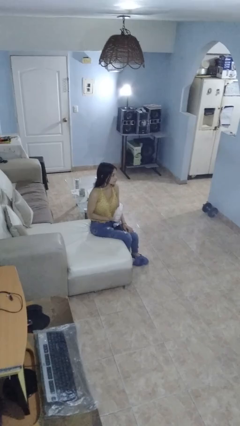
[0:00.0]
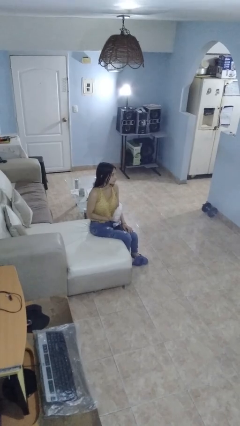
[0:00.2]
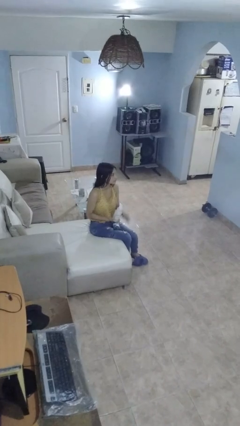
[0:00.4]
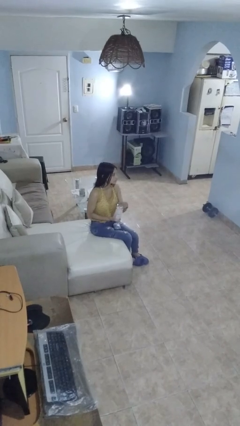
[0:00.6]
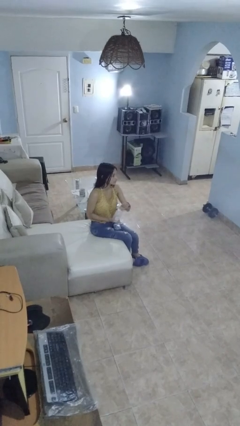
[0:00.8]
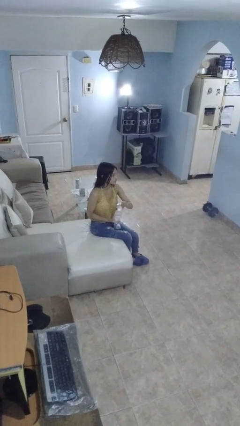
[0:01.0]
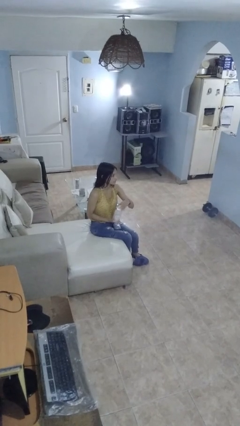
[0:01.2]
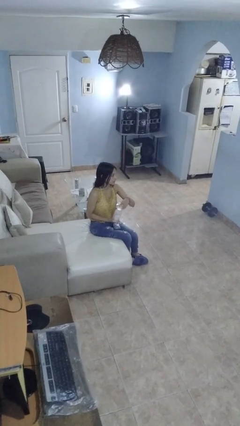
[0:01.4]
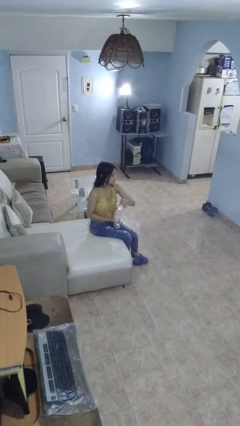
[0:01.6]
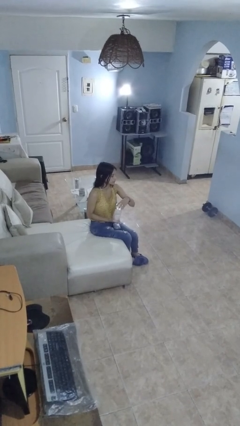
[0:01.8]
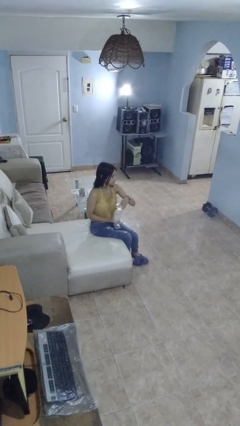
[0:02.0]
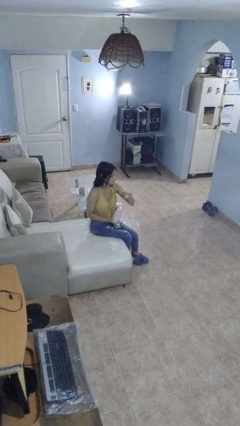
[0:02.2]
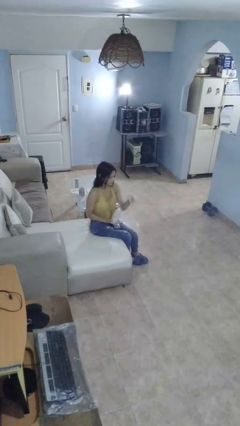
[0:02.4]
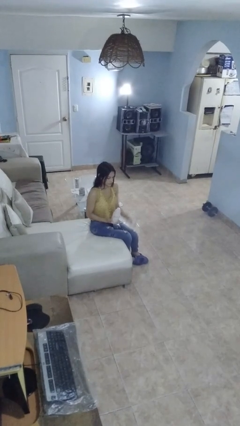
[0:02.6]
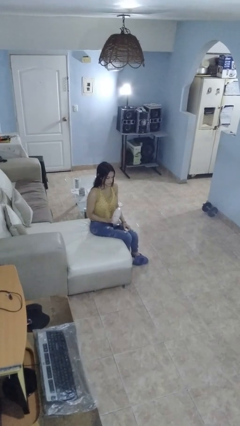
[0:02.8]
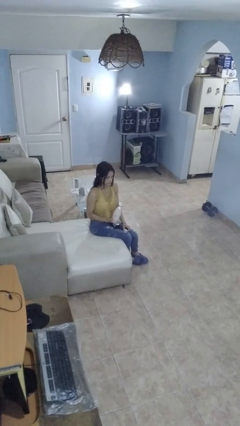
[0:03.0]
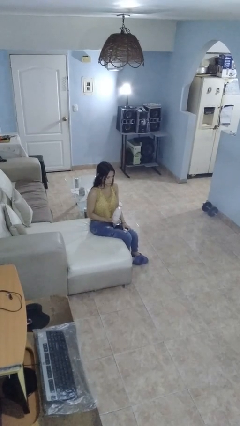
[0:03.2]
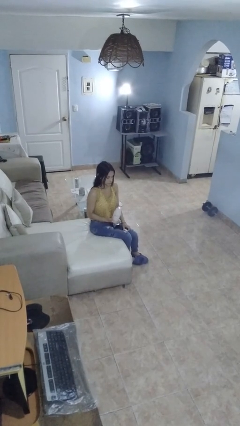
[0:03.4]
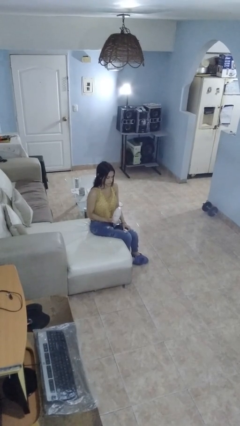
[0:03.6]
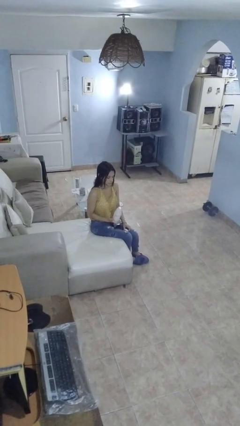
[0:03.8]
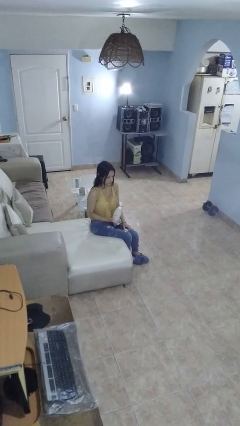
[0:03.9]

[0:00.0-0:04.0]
person unscrews lid from bottle

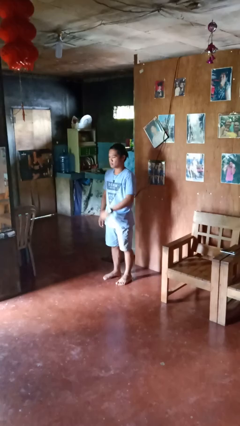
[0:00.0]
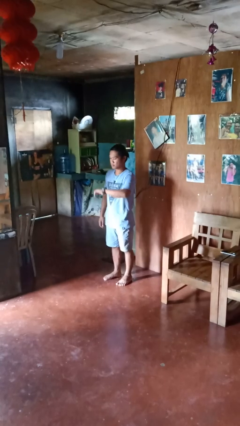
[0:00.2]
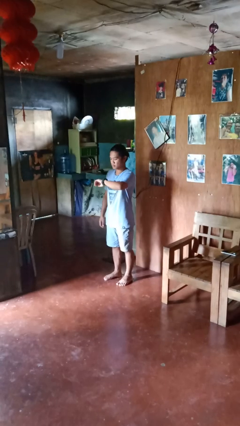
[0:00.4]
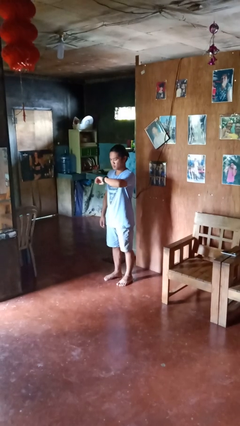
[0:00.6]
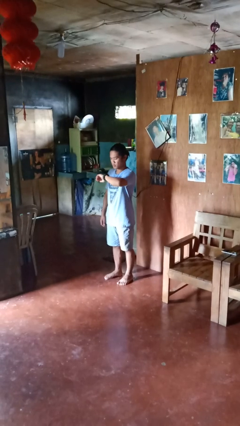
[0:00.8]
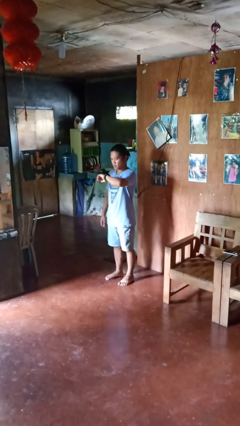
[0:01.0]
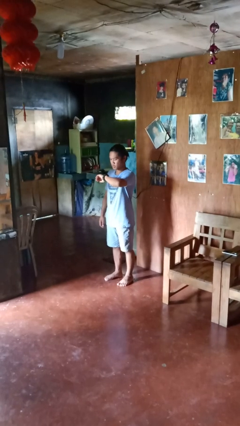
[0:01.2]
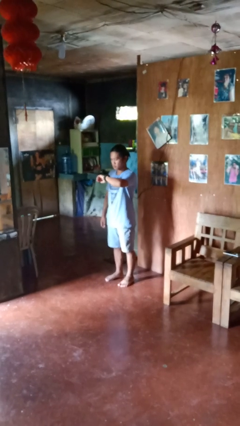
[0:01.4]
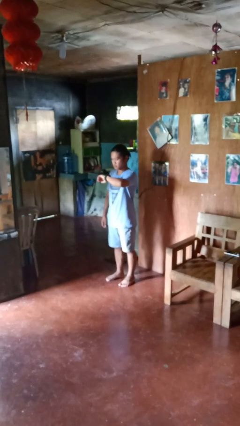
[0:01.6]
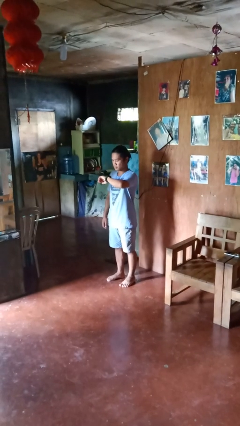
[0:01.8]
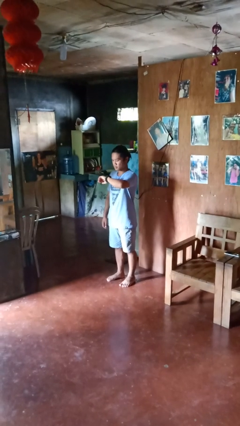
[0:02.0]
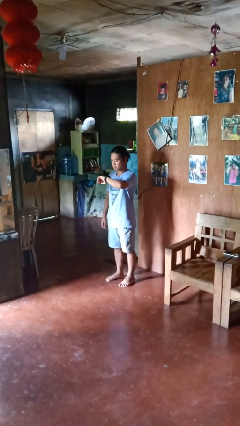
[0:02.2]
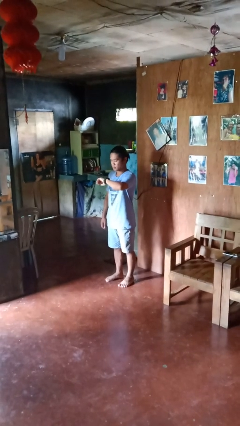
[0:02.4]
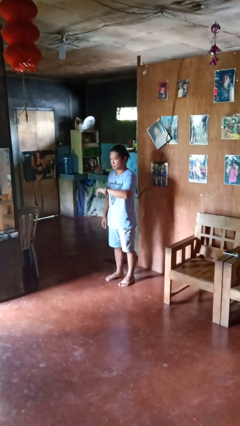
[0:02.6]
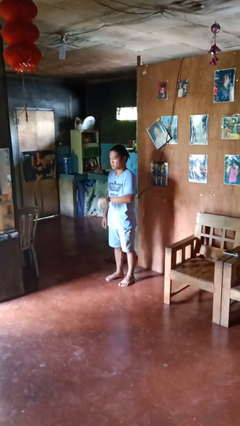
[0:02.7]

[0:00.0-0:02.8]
person looks at wristwatch

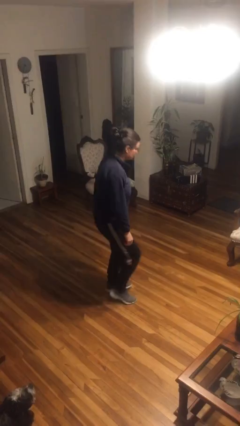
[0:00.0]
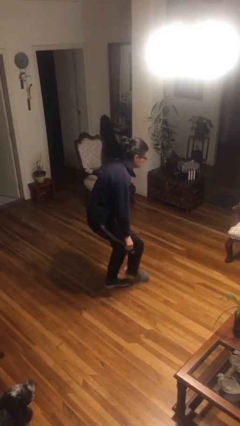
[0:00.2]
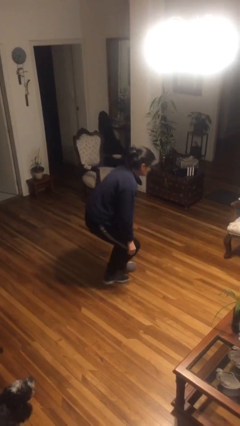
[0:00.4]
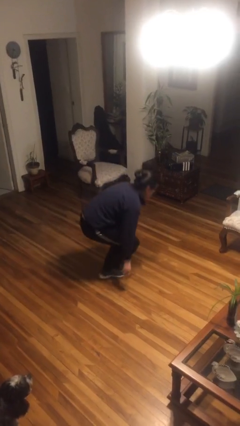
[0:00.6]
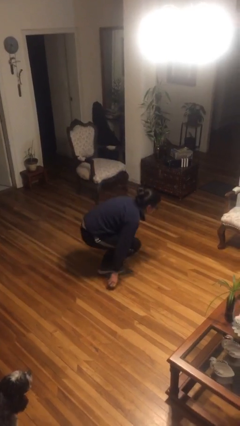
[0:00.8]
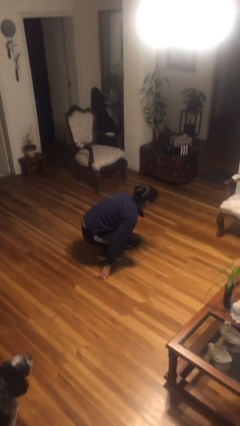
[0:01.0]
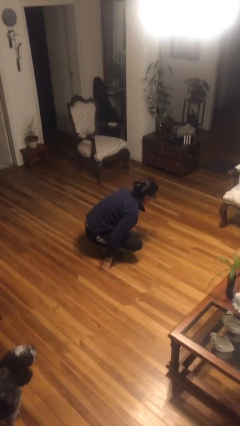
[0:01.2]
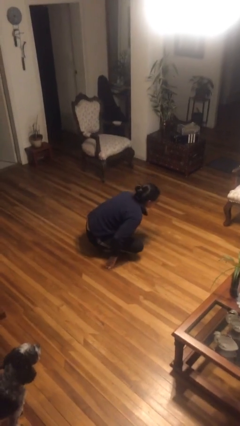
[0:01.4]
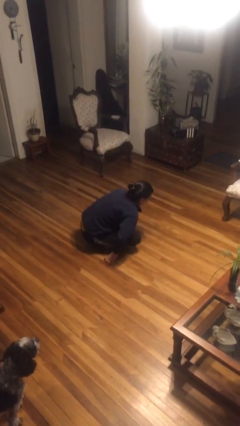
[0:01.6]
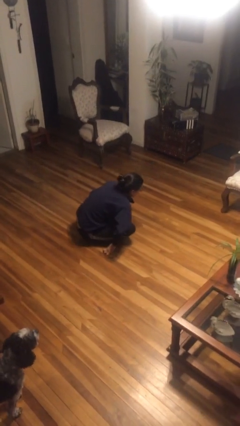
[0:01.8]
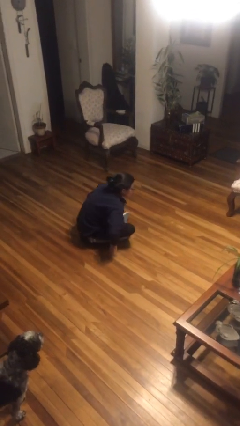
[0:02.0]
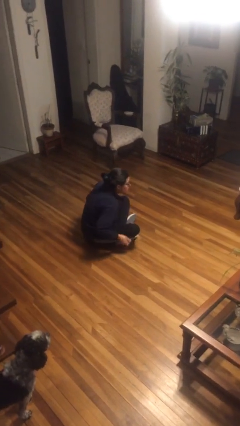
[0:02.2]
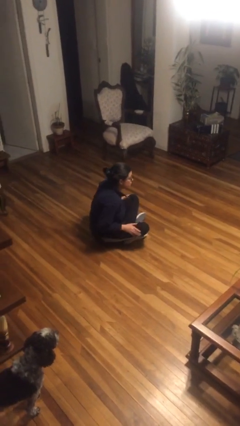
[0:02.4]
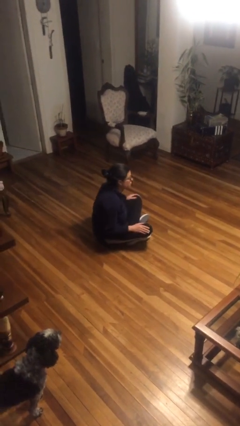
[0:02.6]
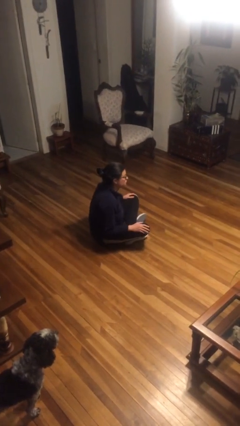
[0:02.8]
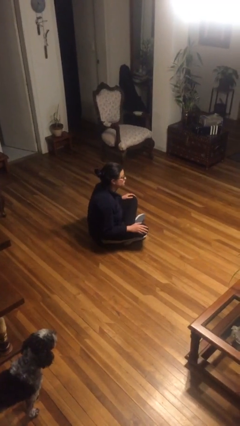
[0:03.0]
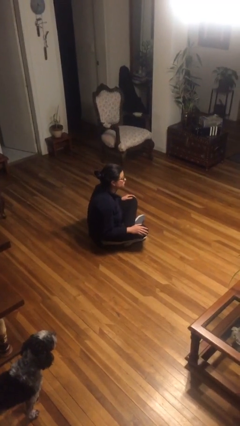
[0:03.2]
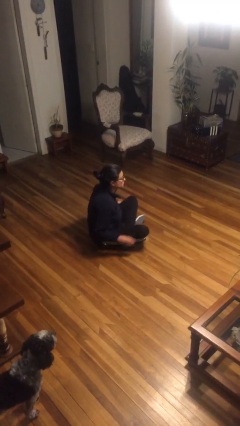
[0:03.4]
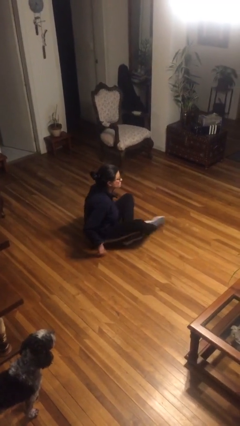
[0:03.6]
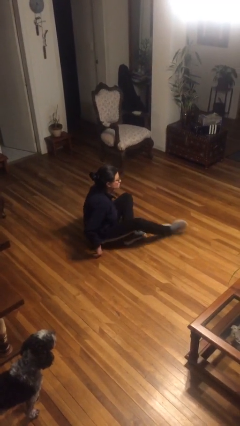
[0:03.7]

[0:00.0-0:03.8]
person sits crisscross

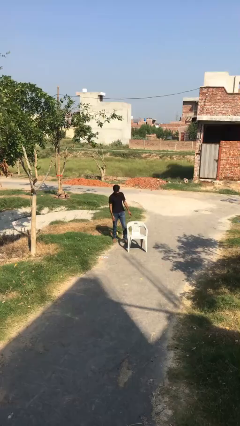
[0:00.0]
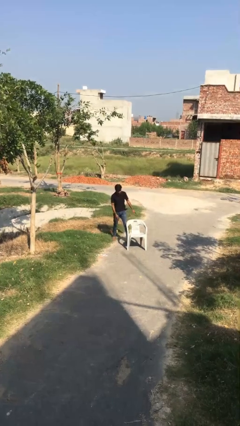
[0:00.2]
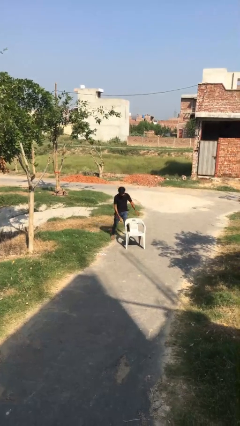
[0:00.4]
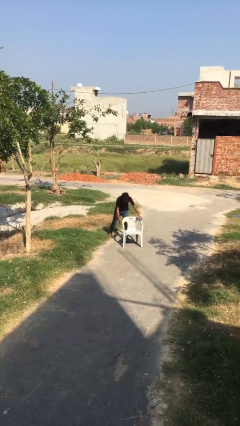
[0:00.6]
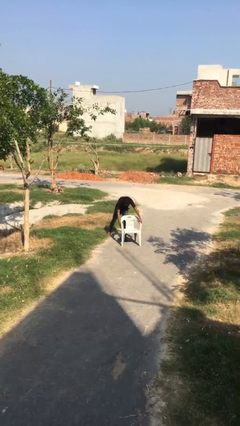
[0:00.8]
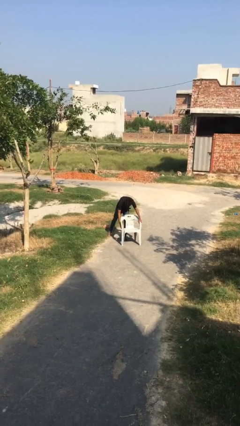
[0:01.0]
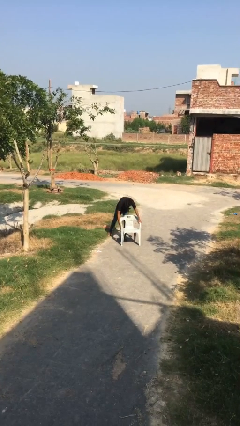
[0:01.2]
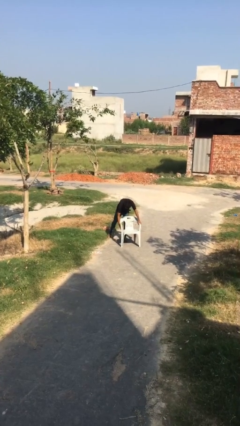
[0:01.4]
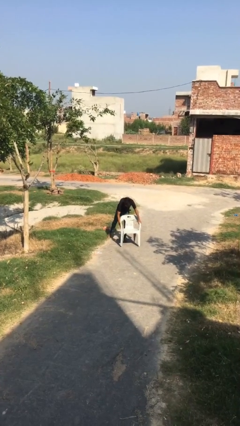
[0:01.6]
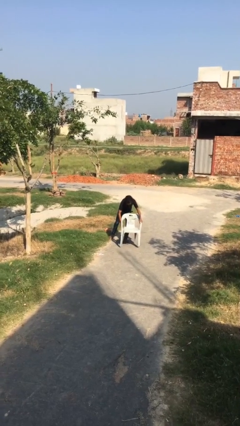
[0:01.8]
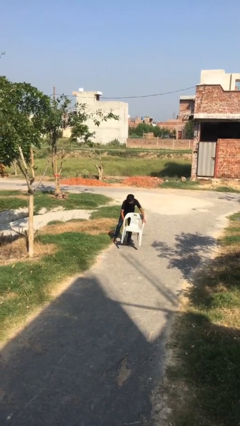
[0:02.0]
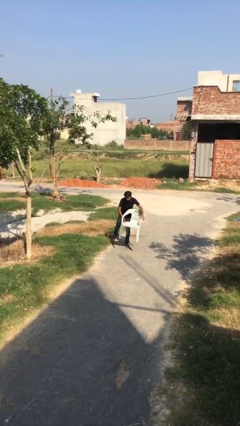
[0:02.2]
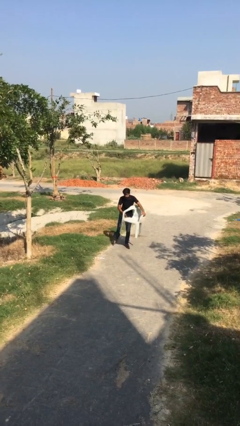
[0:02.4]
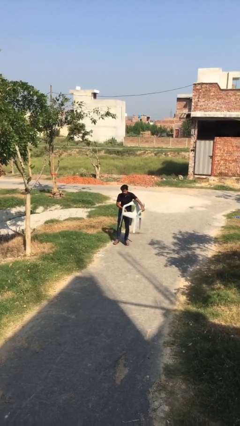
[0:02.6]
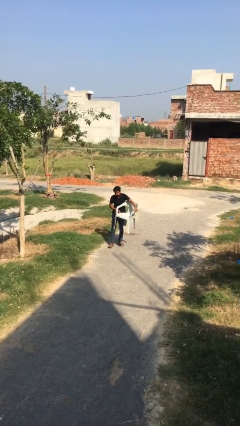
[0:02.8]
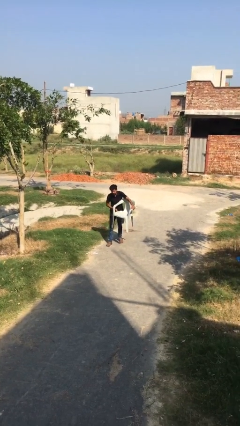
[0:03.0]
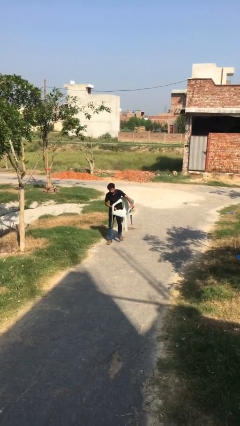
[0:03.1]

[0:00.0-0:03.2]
person picks up object from floor

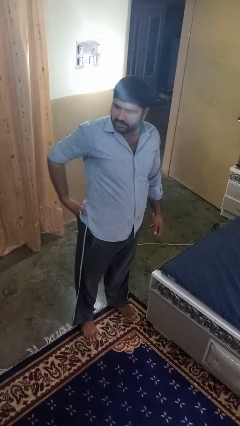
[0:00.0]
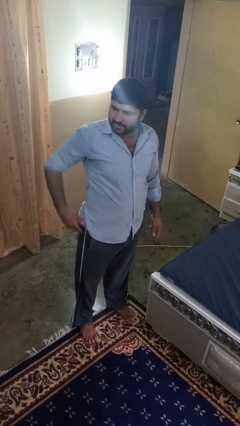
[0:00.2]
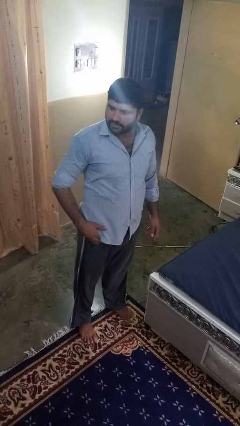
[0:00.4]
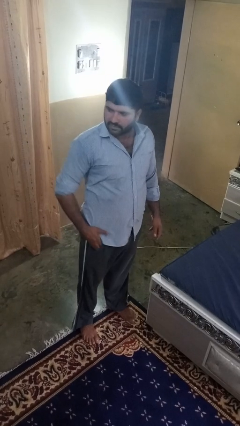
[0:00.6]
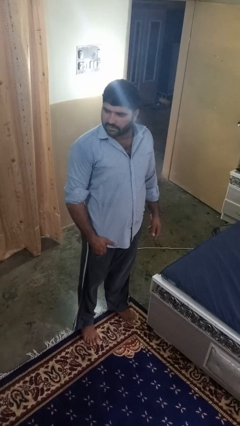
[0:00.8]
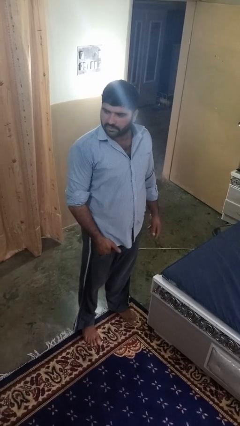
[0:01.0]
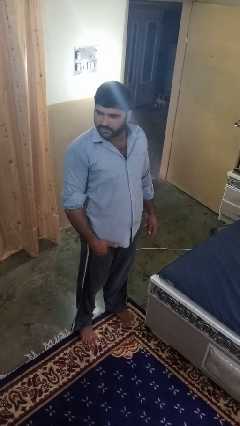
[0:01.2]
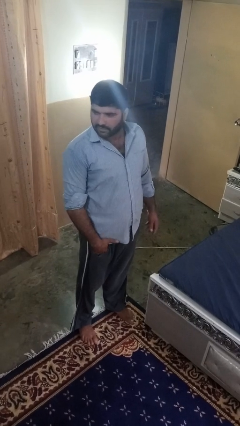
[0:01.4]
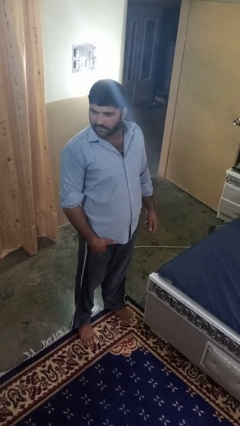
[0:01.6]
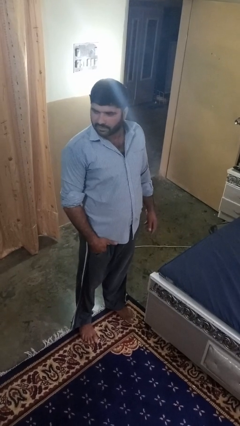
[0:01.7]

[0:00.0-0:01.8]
person puts hands in back pockets

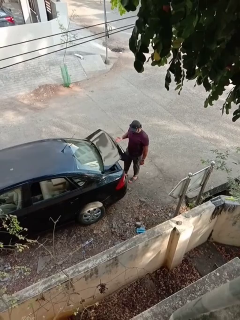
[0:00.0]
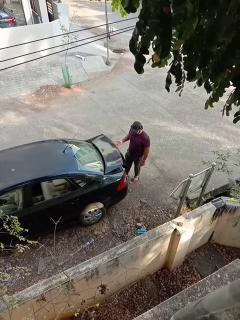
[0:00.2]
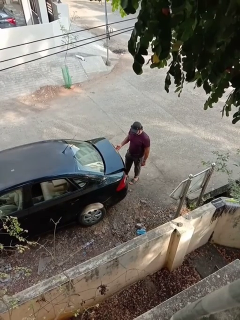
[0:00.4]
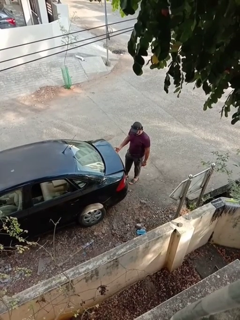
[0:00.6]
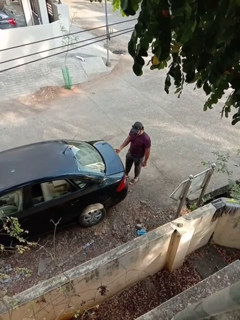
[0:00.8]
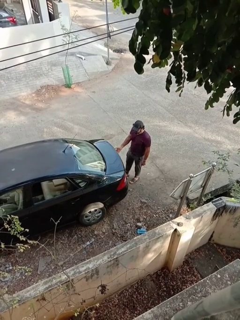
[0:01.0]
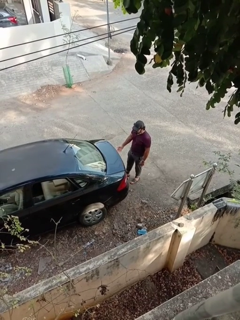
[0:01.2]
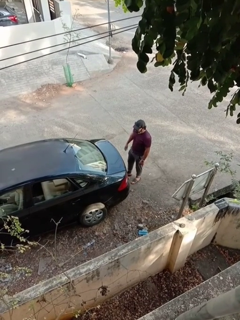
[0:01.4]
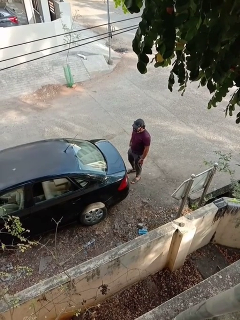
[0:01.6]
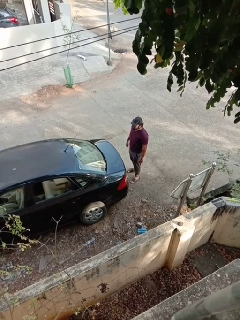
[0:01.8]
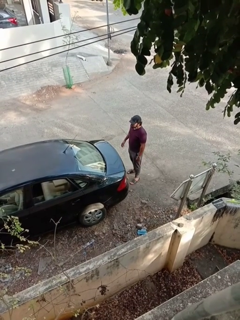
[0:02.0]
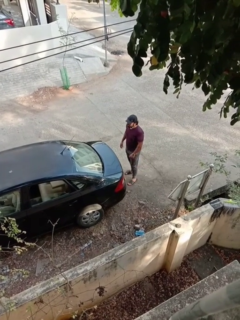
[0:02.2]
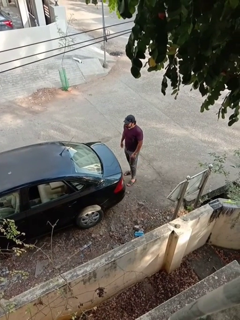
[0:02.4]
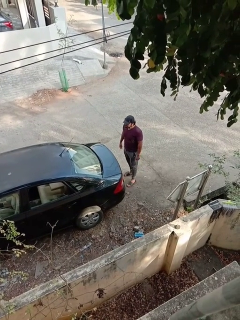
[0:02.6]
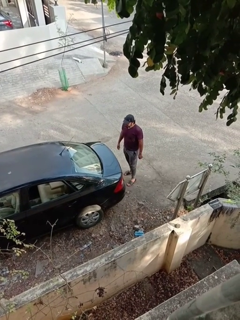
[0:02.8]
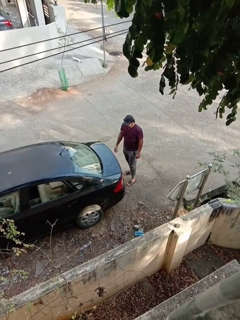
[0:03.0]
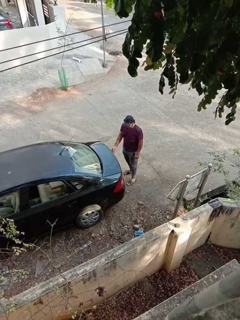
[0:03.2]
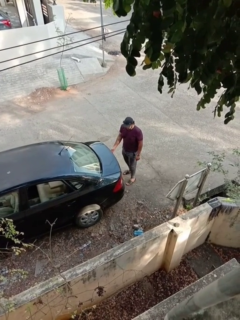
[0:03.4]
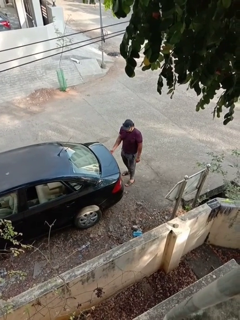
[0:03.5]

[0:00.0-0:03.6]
person closes car trunk
